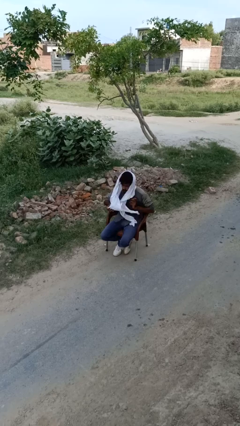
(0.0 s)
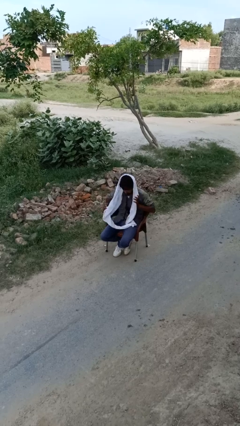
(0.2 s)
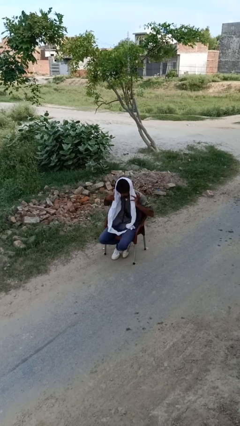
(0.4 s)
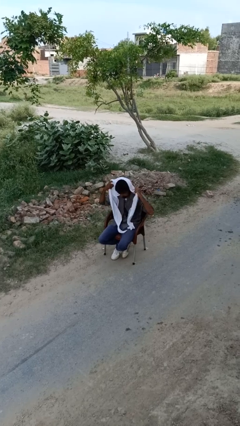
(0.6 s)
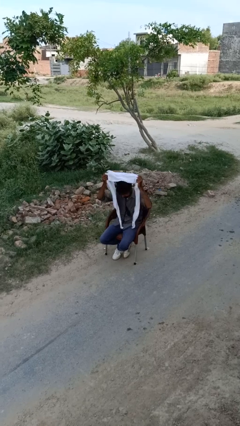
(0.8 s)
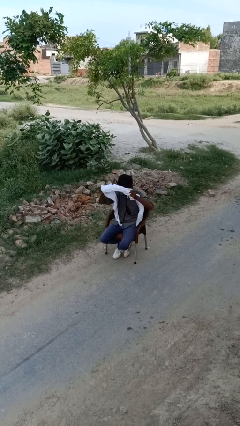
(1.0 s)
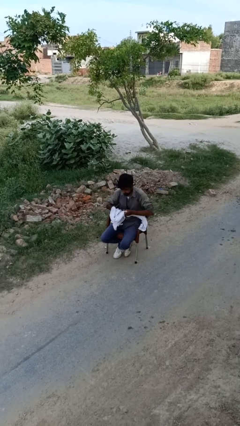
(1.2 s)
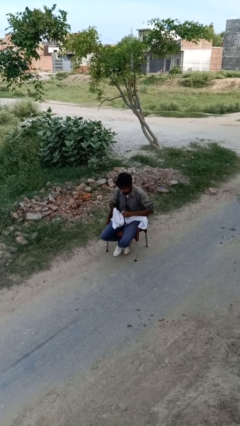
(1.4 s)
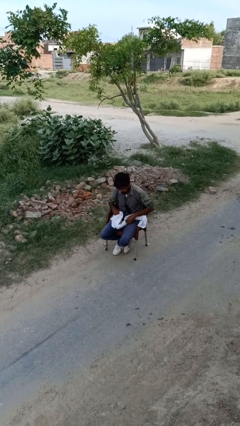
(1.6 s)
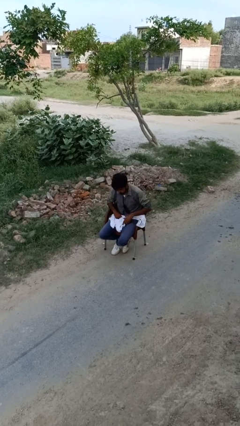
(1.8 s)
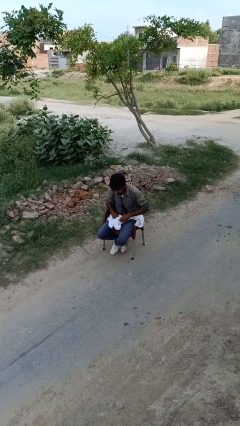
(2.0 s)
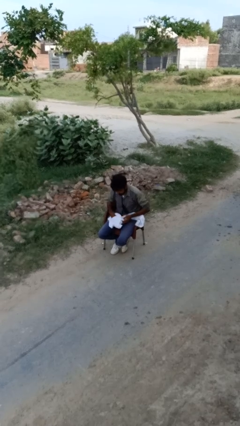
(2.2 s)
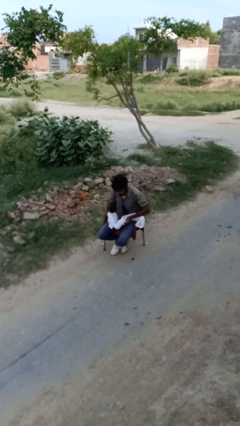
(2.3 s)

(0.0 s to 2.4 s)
person takes off scarf

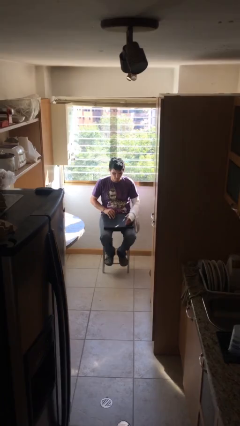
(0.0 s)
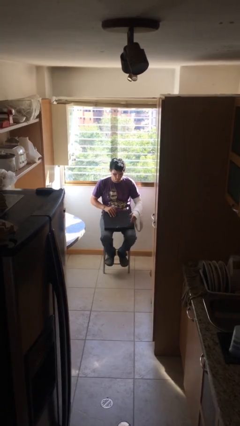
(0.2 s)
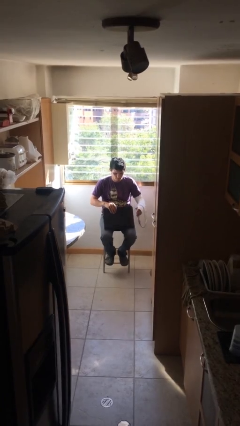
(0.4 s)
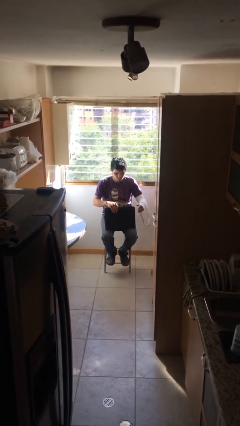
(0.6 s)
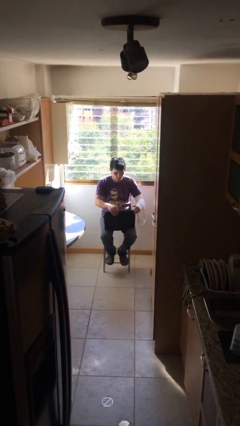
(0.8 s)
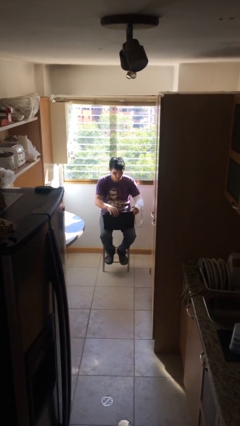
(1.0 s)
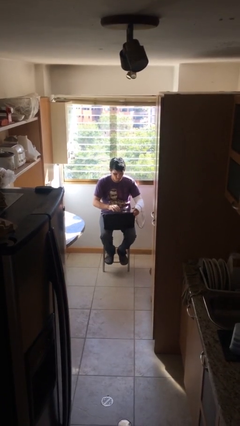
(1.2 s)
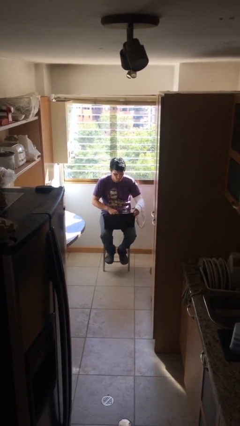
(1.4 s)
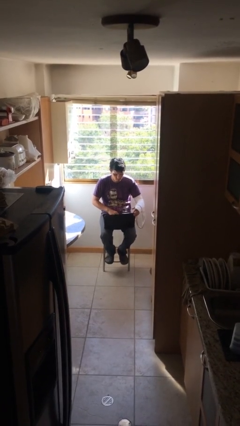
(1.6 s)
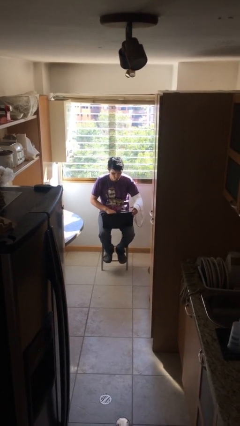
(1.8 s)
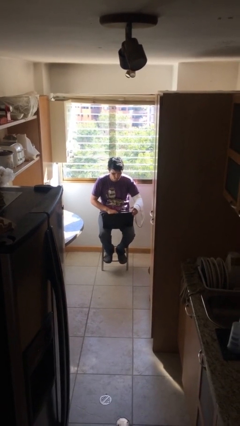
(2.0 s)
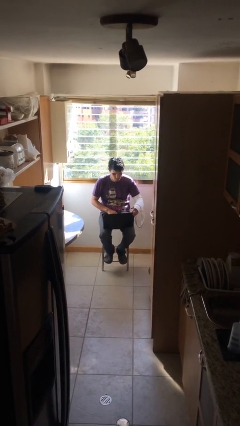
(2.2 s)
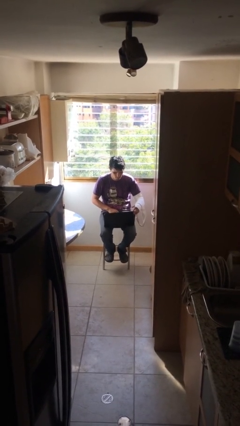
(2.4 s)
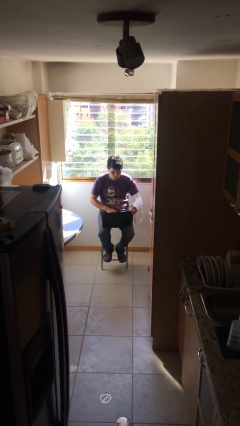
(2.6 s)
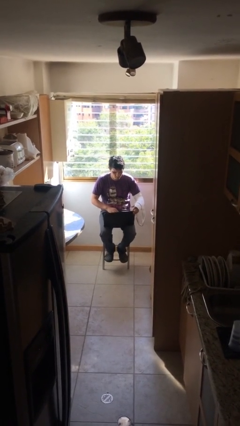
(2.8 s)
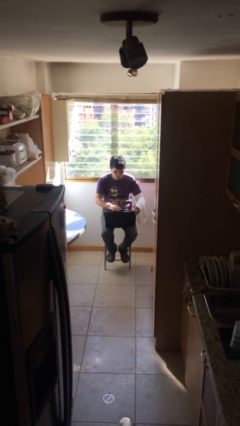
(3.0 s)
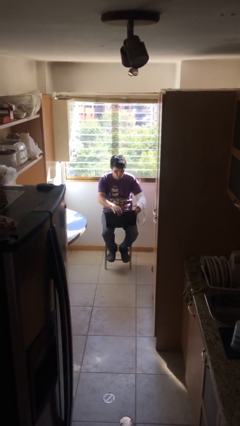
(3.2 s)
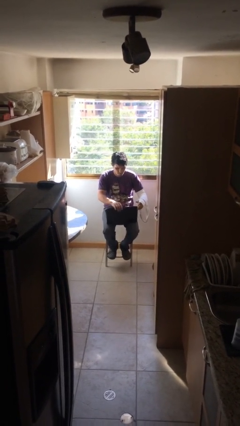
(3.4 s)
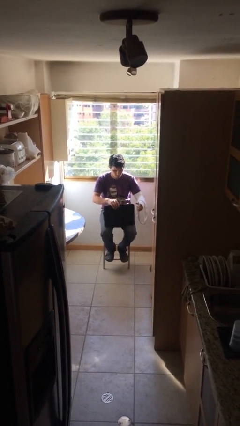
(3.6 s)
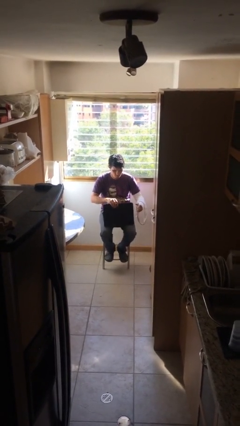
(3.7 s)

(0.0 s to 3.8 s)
person interacts with laptop

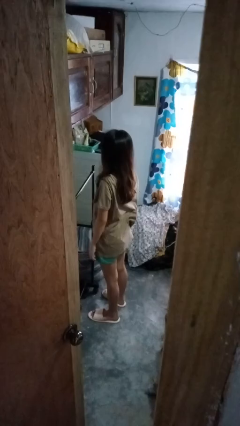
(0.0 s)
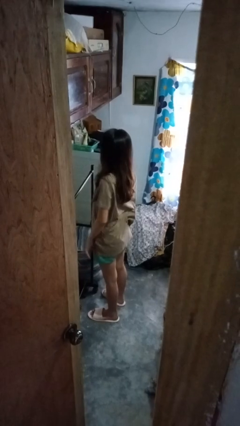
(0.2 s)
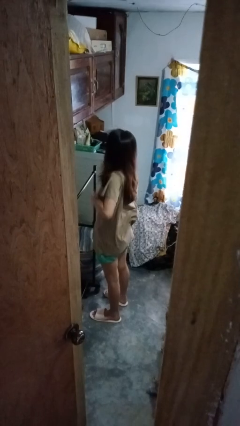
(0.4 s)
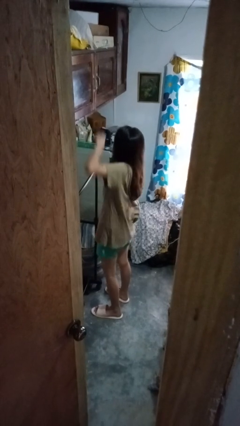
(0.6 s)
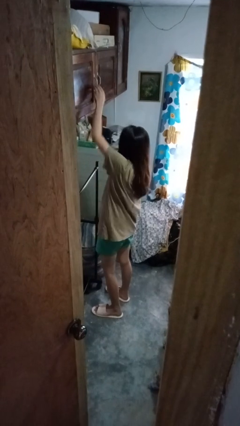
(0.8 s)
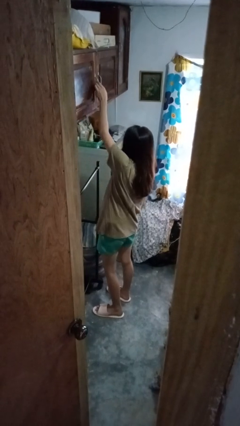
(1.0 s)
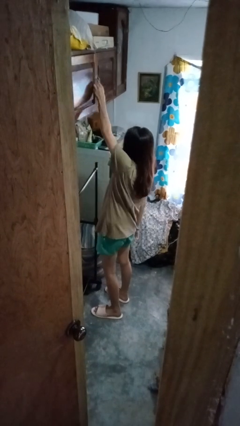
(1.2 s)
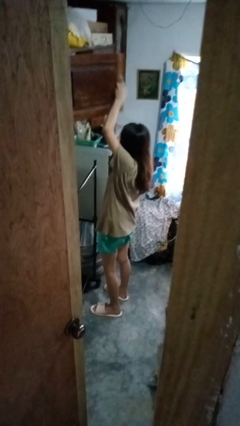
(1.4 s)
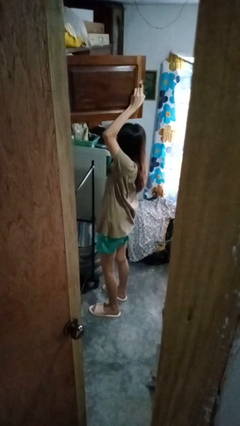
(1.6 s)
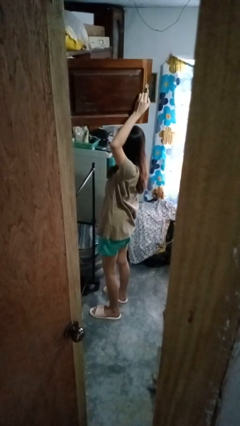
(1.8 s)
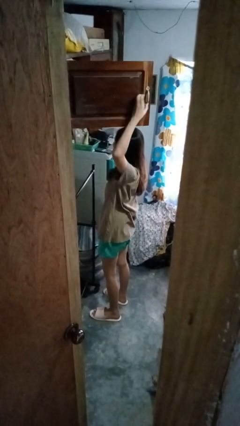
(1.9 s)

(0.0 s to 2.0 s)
person opens closet door

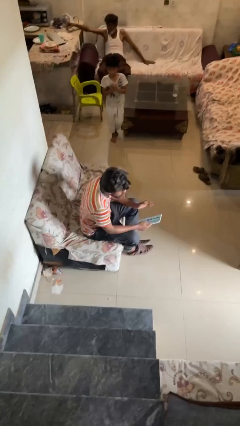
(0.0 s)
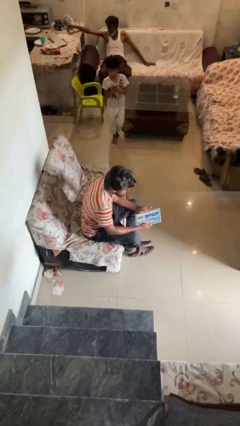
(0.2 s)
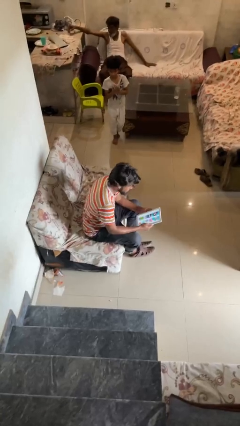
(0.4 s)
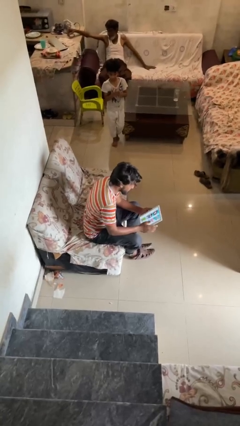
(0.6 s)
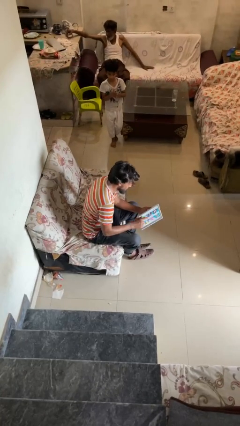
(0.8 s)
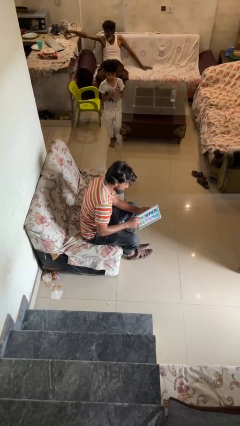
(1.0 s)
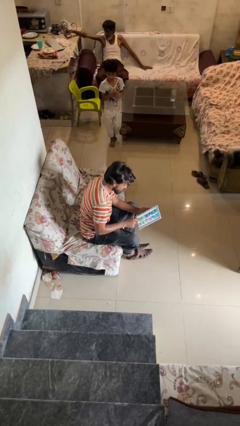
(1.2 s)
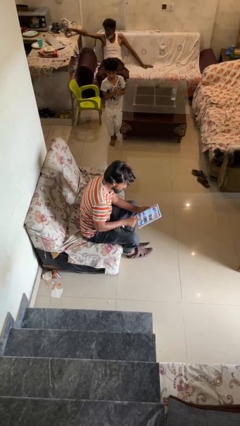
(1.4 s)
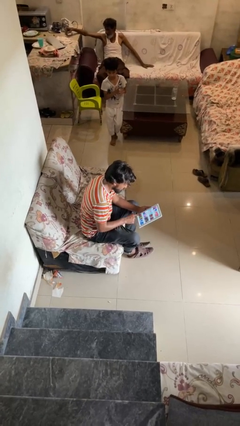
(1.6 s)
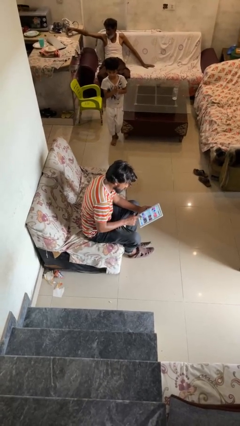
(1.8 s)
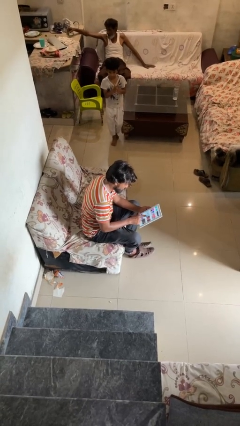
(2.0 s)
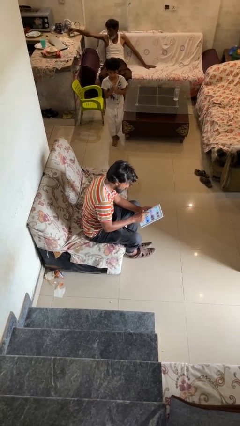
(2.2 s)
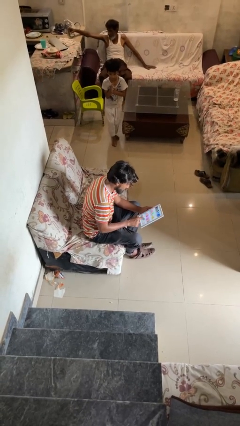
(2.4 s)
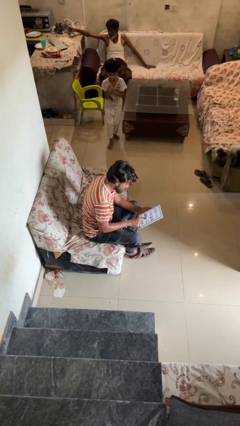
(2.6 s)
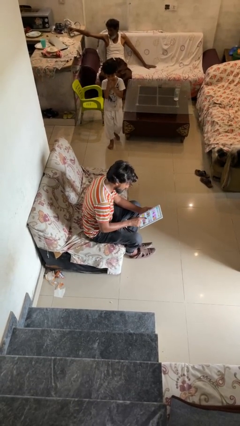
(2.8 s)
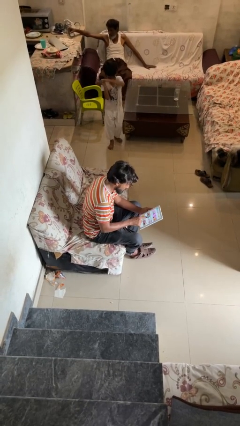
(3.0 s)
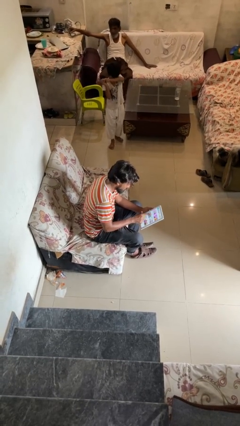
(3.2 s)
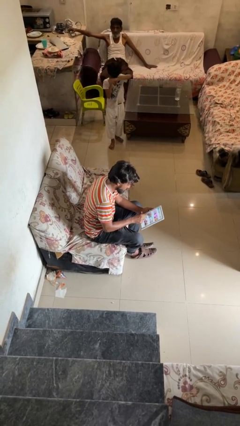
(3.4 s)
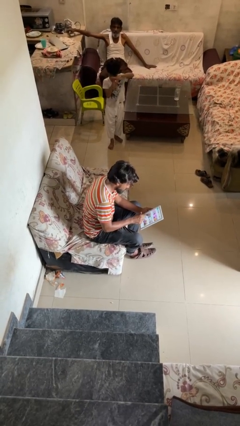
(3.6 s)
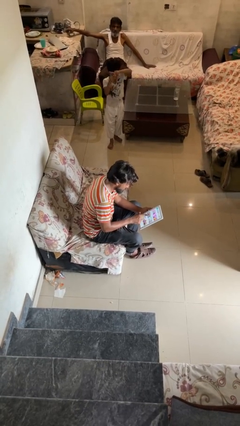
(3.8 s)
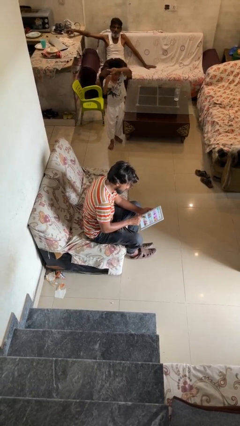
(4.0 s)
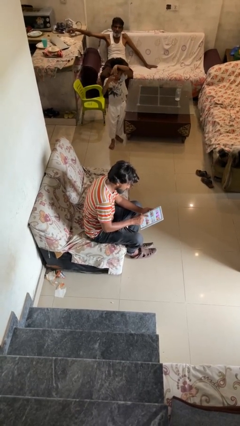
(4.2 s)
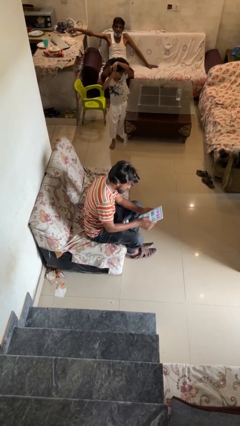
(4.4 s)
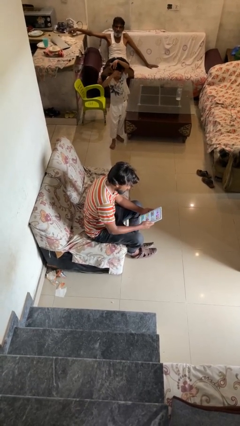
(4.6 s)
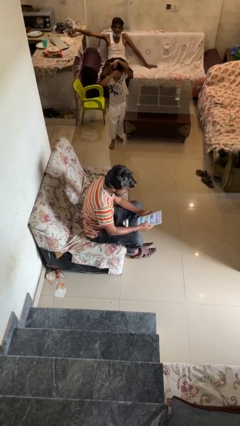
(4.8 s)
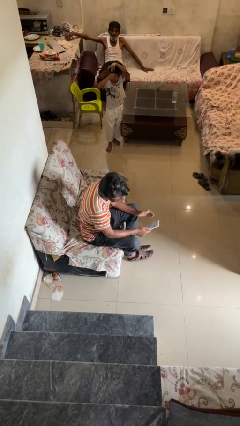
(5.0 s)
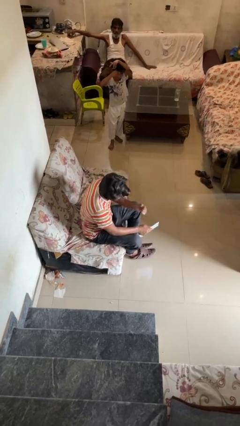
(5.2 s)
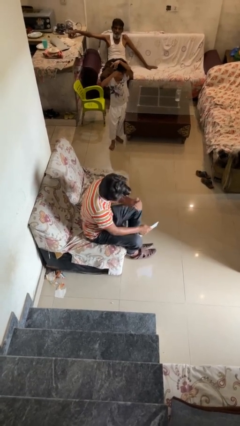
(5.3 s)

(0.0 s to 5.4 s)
person interacts with tablet

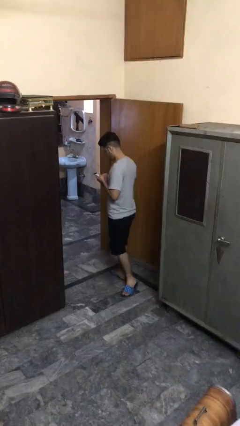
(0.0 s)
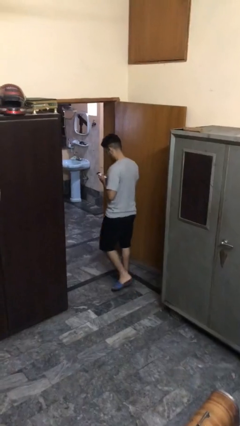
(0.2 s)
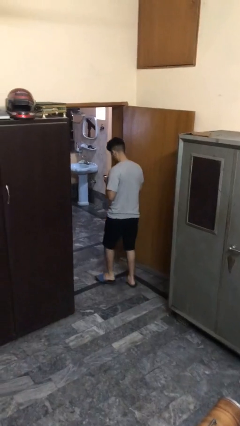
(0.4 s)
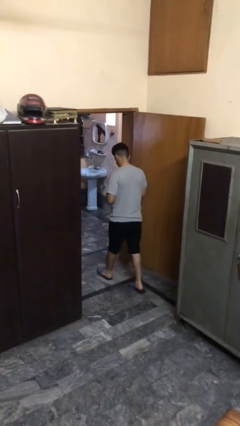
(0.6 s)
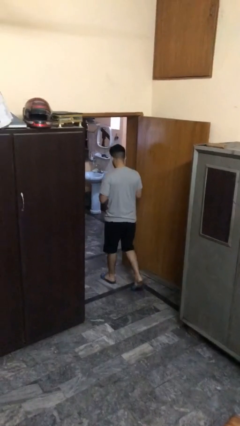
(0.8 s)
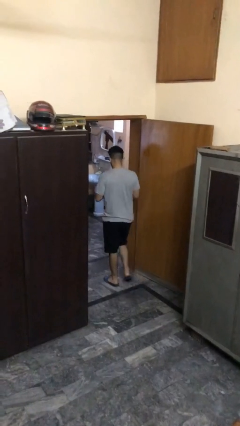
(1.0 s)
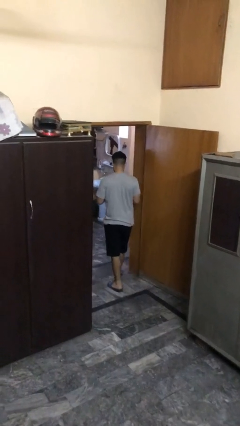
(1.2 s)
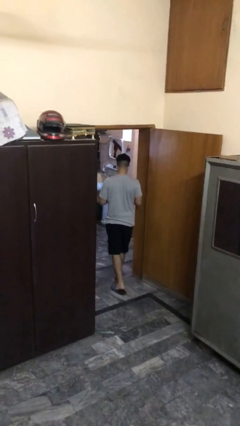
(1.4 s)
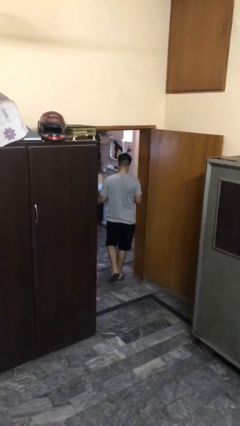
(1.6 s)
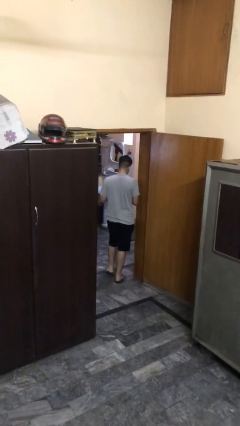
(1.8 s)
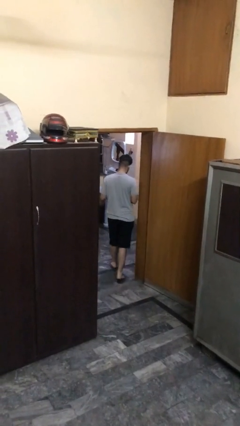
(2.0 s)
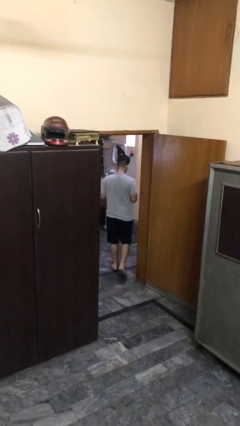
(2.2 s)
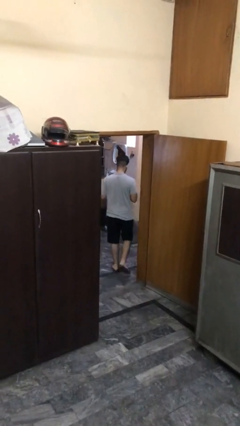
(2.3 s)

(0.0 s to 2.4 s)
person exits scene through structure

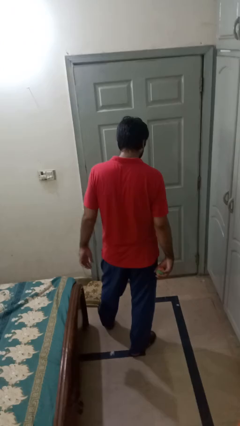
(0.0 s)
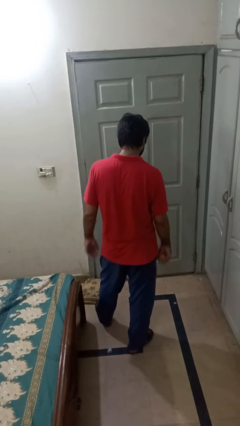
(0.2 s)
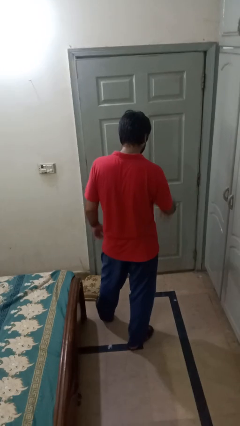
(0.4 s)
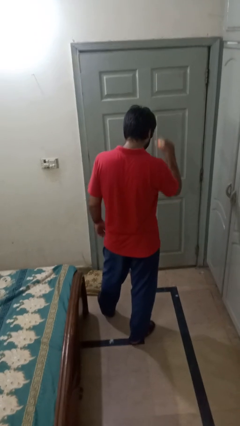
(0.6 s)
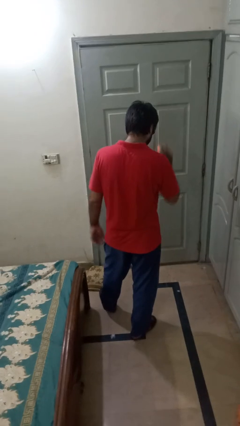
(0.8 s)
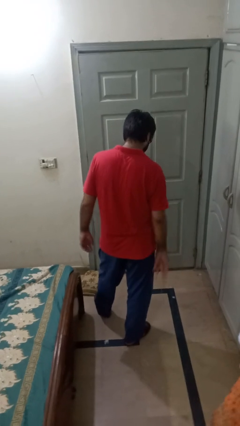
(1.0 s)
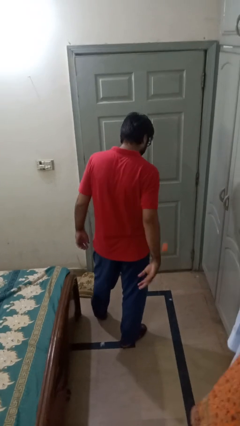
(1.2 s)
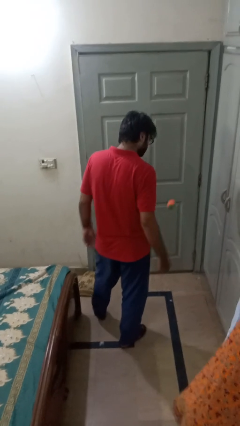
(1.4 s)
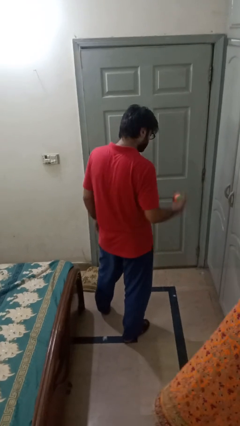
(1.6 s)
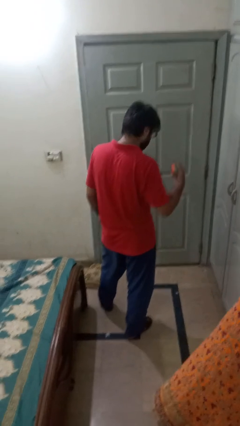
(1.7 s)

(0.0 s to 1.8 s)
person bounces ball on floor
